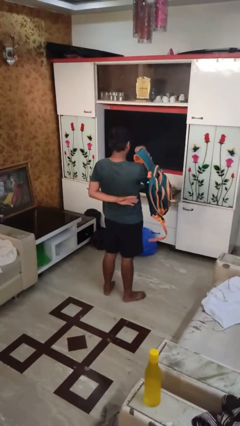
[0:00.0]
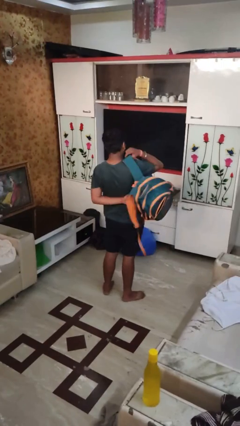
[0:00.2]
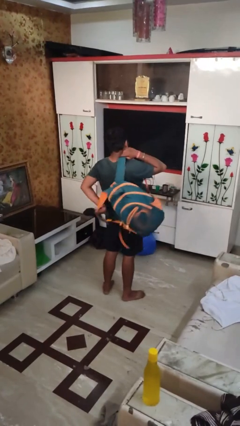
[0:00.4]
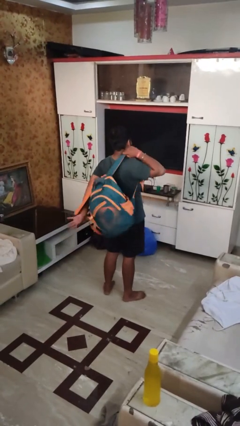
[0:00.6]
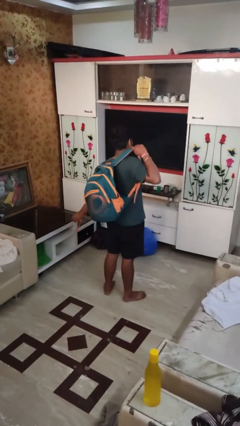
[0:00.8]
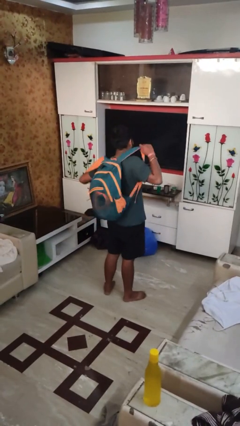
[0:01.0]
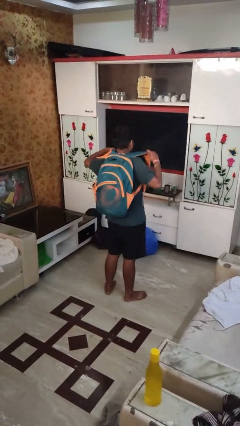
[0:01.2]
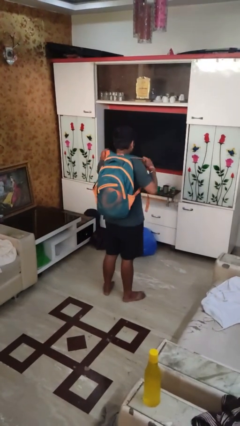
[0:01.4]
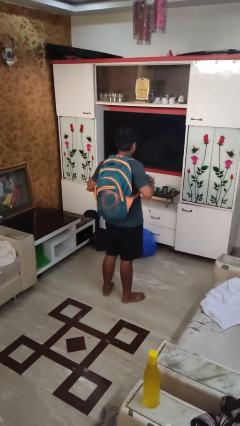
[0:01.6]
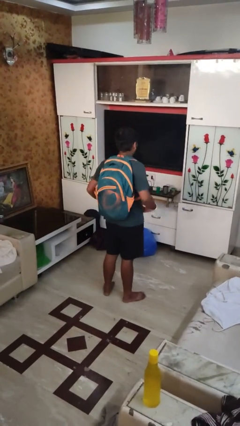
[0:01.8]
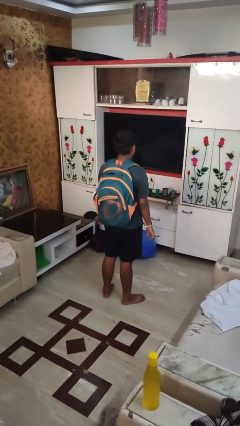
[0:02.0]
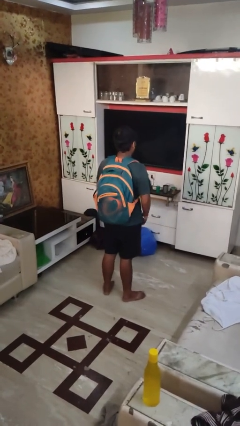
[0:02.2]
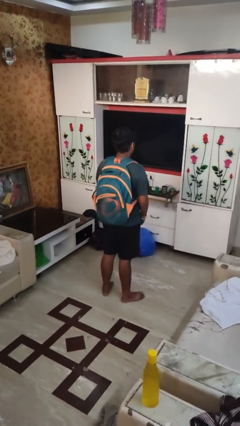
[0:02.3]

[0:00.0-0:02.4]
person puts on backpack

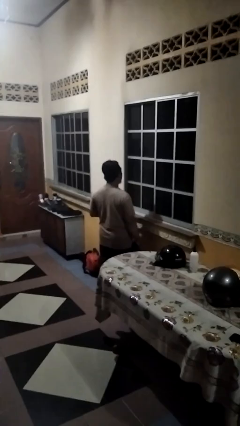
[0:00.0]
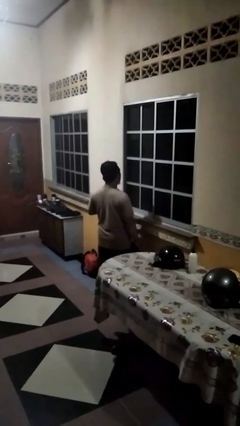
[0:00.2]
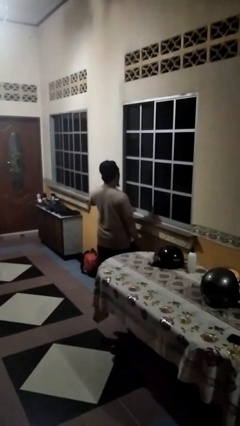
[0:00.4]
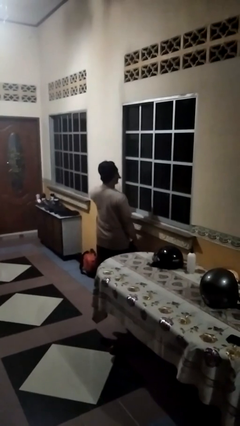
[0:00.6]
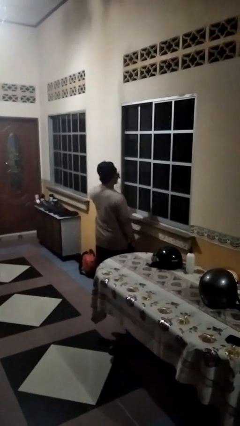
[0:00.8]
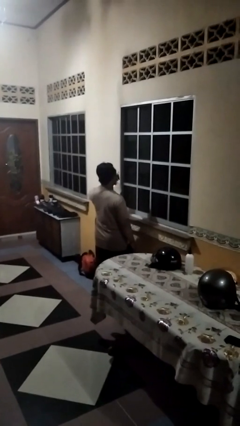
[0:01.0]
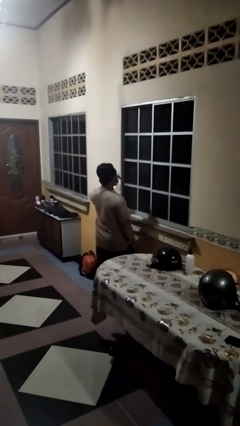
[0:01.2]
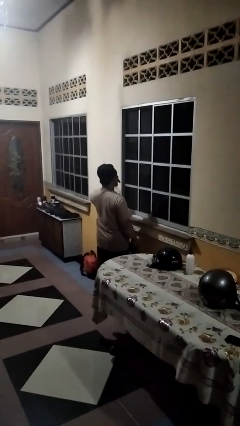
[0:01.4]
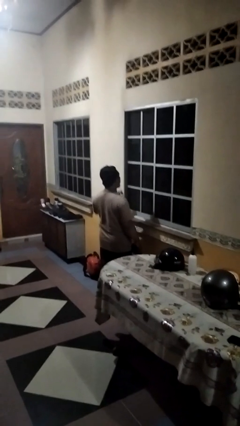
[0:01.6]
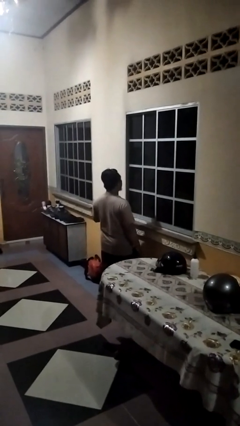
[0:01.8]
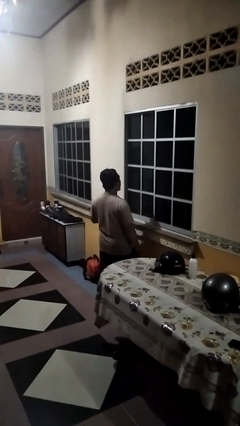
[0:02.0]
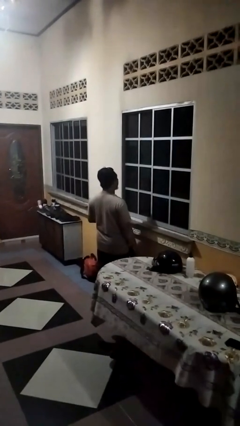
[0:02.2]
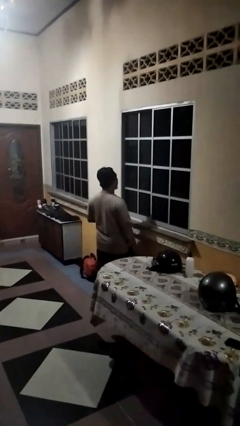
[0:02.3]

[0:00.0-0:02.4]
person sprays from bottle

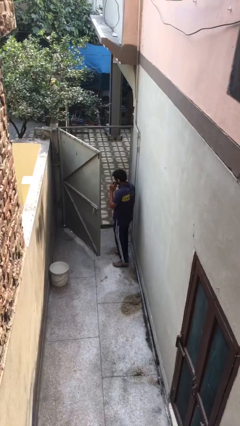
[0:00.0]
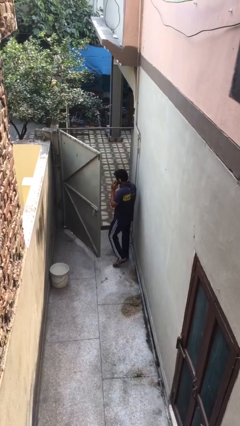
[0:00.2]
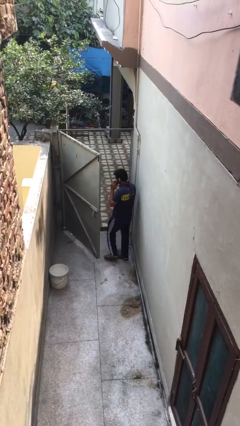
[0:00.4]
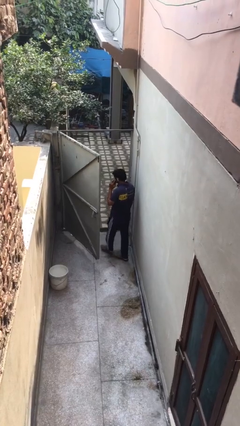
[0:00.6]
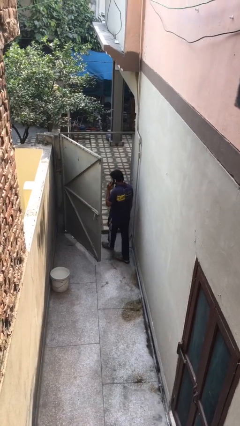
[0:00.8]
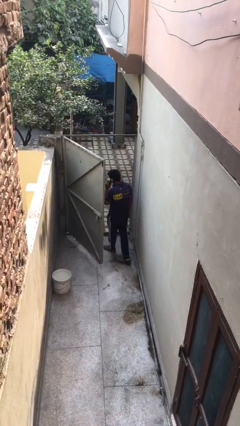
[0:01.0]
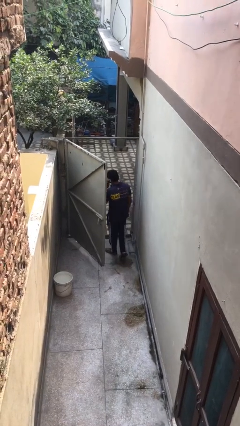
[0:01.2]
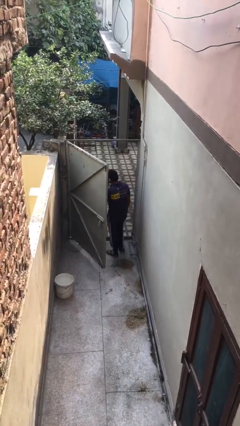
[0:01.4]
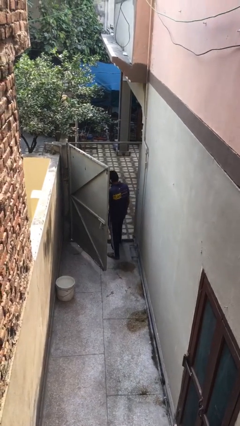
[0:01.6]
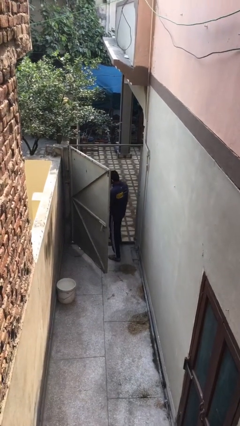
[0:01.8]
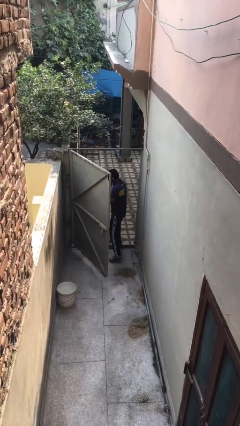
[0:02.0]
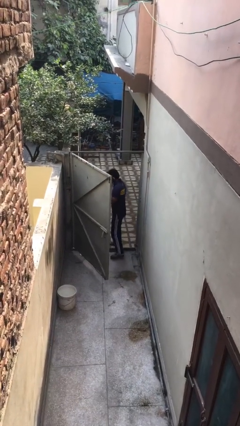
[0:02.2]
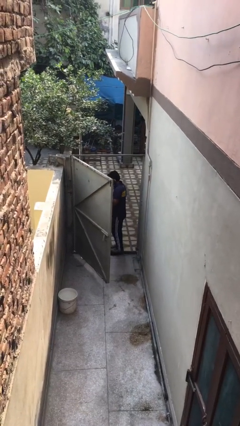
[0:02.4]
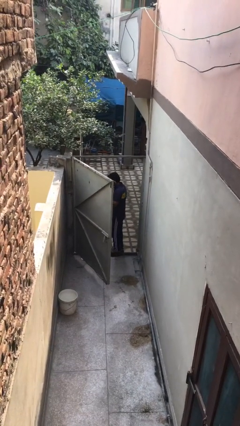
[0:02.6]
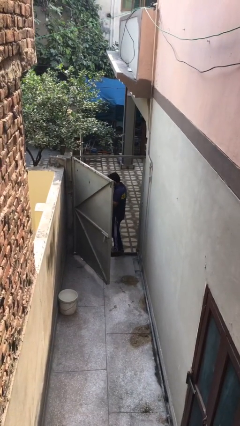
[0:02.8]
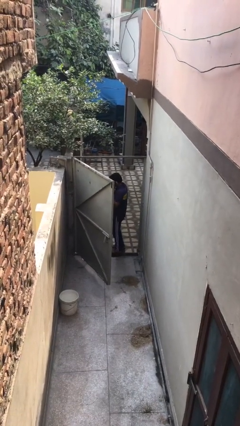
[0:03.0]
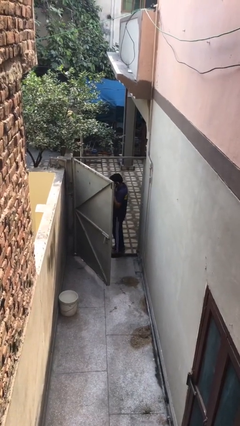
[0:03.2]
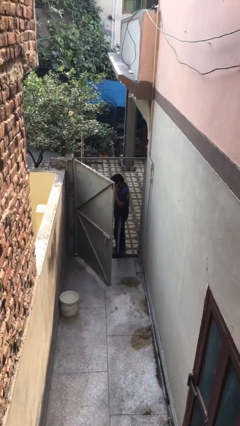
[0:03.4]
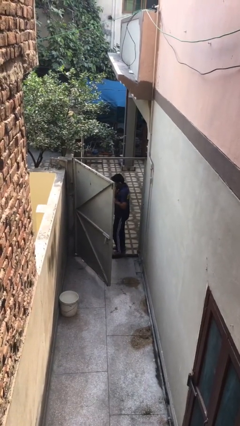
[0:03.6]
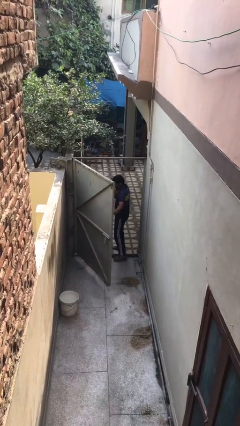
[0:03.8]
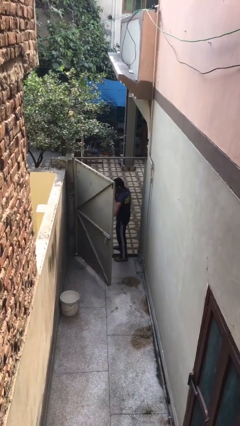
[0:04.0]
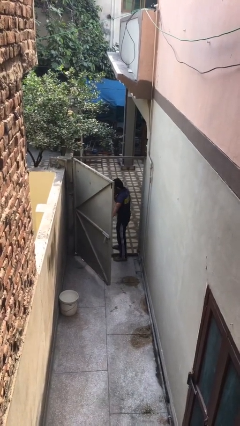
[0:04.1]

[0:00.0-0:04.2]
person exits scene through structure

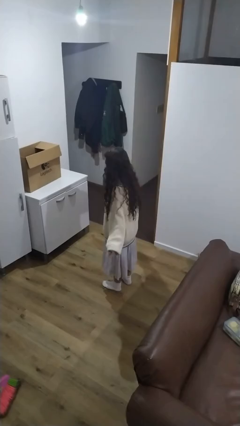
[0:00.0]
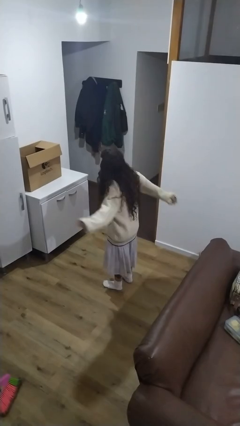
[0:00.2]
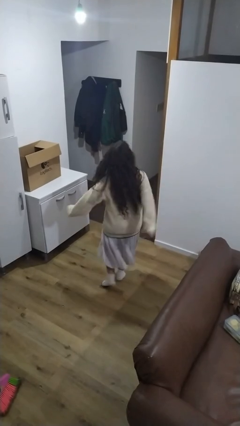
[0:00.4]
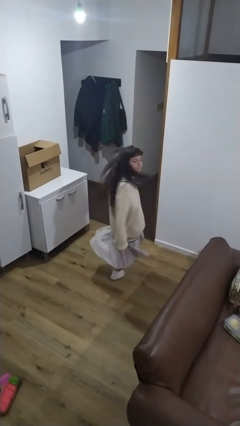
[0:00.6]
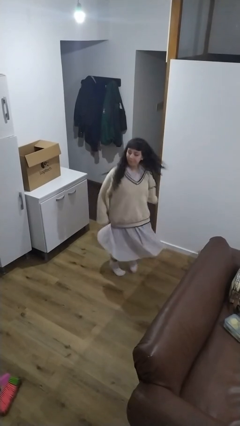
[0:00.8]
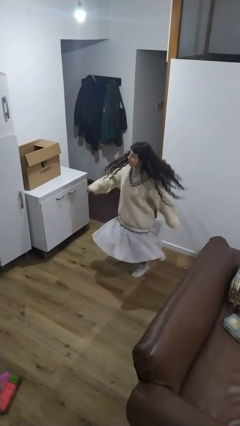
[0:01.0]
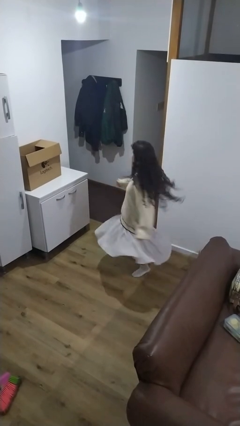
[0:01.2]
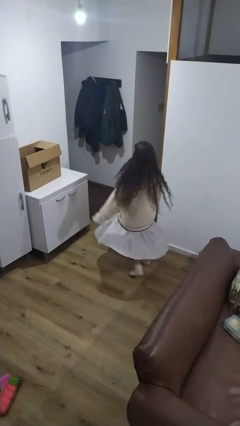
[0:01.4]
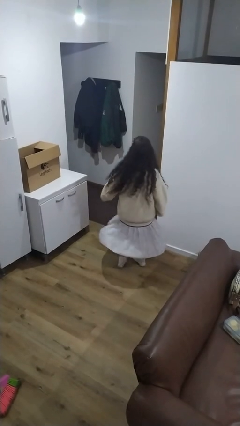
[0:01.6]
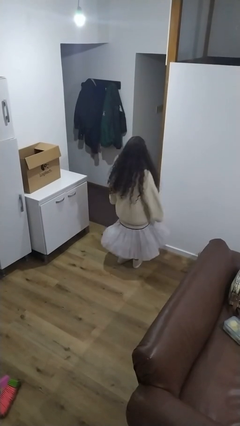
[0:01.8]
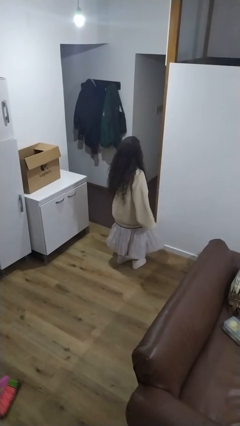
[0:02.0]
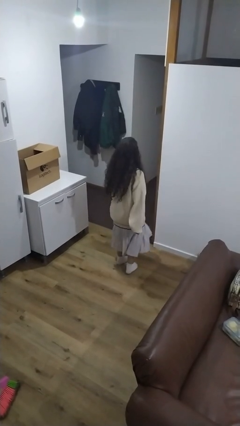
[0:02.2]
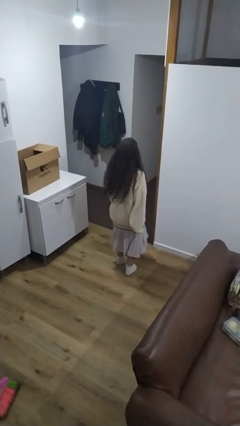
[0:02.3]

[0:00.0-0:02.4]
person twirls

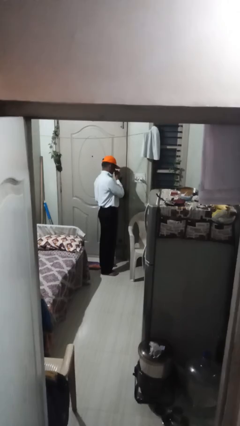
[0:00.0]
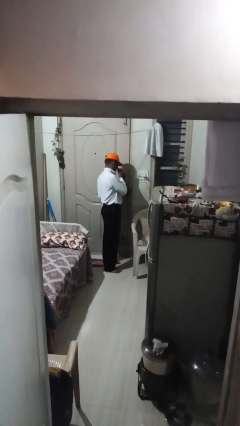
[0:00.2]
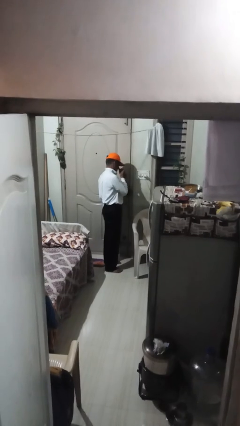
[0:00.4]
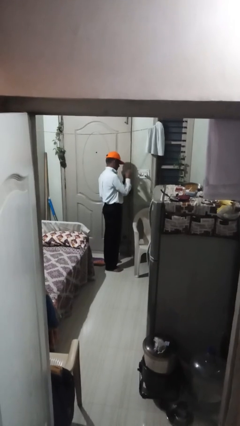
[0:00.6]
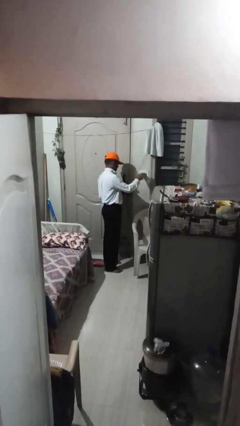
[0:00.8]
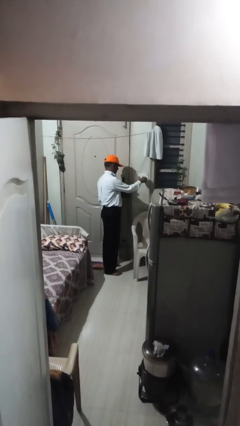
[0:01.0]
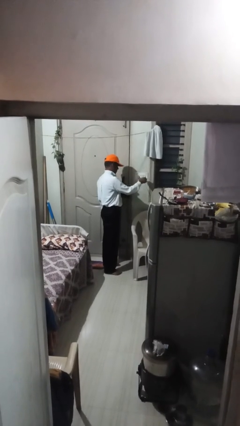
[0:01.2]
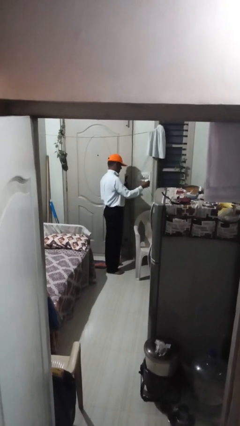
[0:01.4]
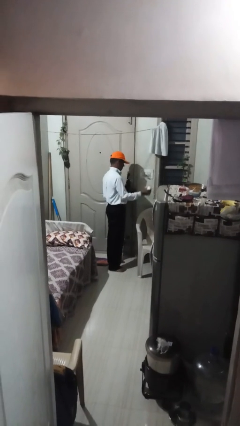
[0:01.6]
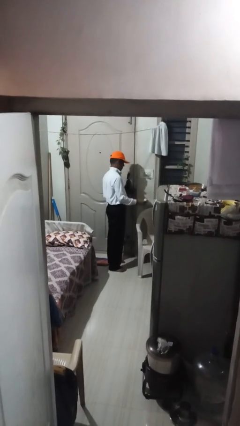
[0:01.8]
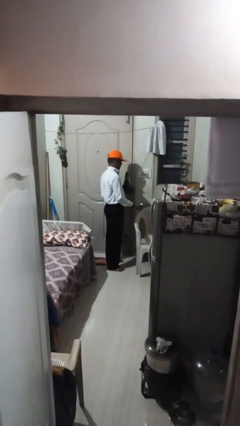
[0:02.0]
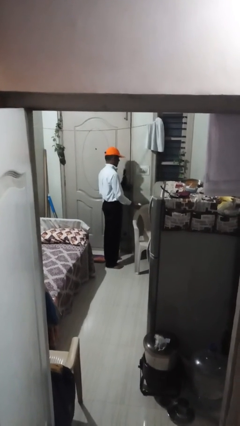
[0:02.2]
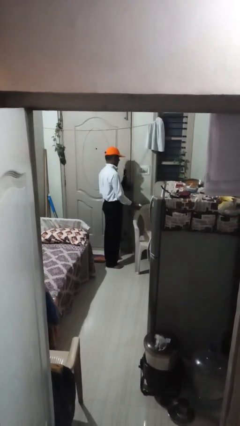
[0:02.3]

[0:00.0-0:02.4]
person unplugs from electrical socket

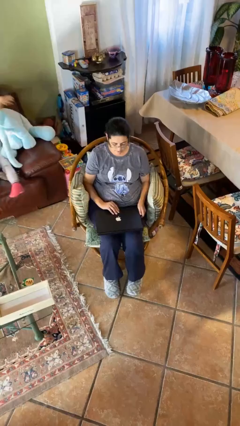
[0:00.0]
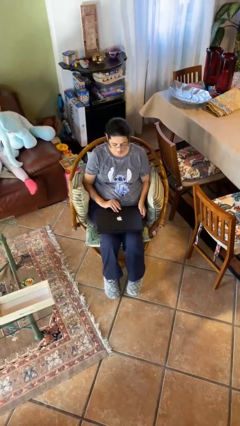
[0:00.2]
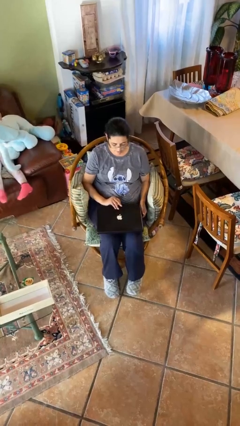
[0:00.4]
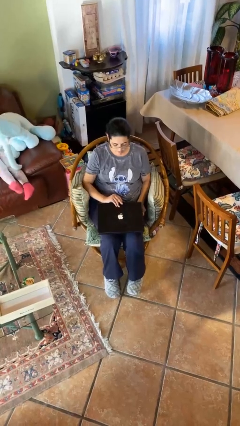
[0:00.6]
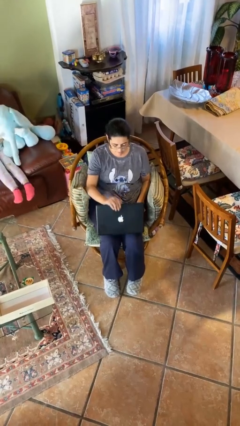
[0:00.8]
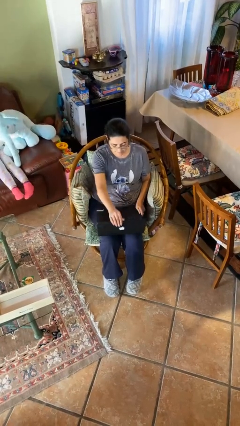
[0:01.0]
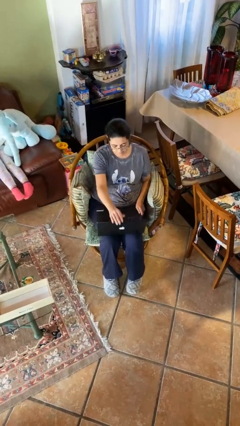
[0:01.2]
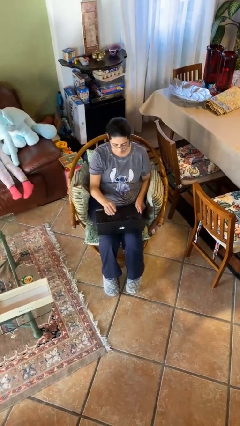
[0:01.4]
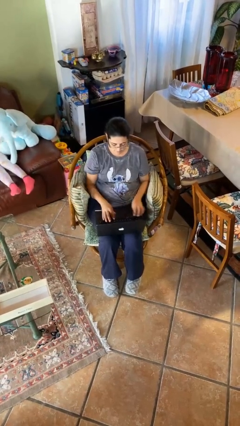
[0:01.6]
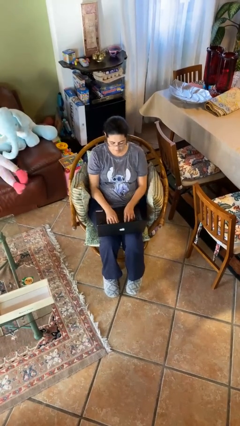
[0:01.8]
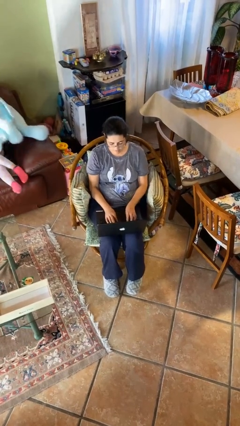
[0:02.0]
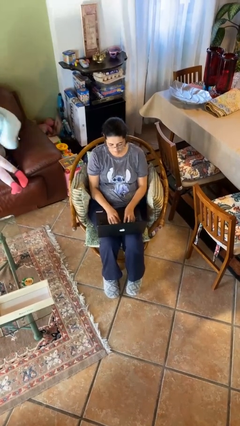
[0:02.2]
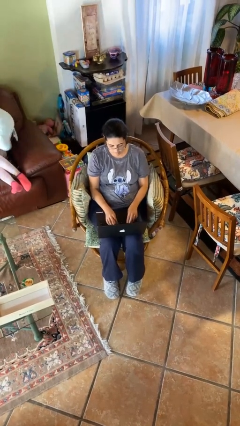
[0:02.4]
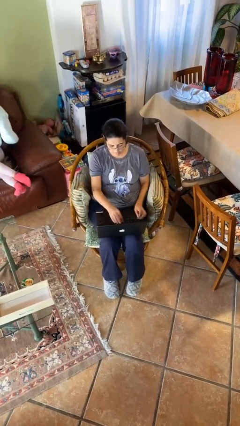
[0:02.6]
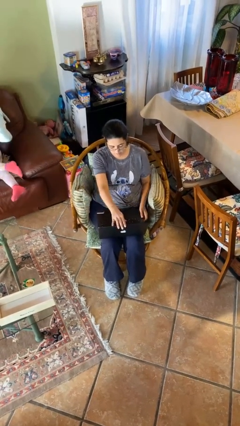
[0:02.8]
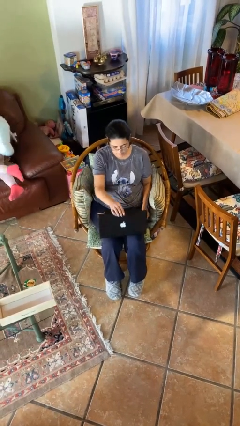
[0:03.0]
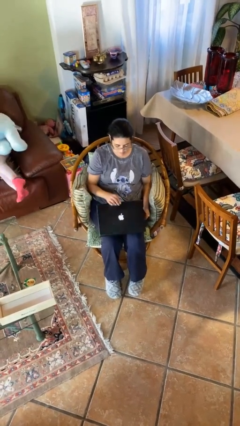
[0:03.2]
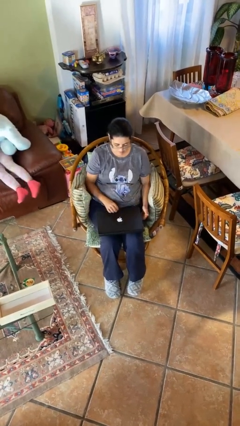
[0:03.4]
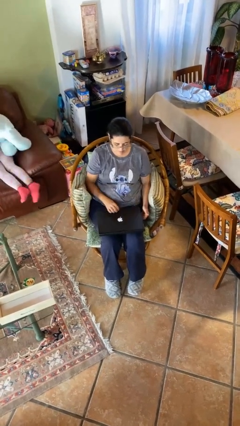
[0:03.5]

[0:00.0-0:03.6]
person interacts with laptop
